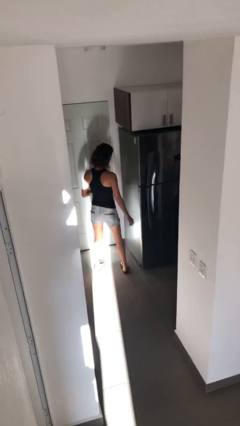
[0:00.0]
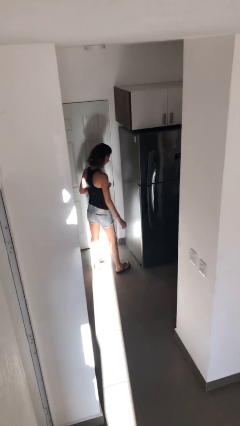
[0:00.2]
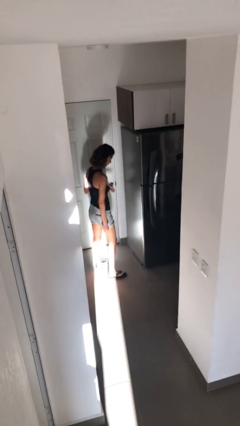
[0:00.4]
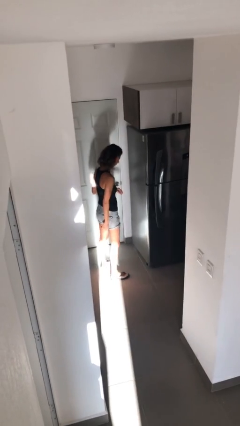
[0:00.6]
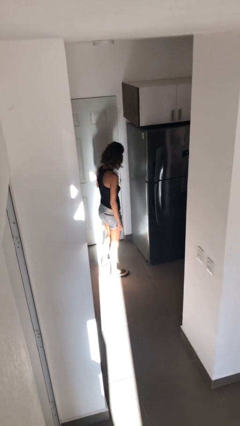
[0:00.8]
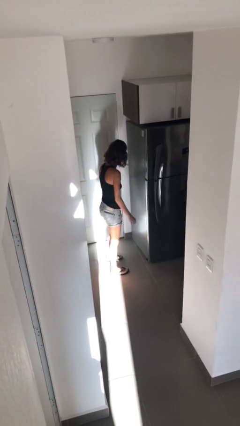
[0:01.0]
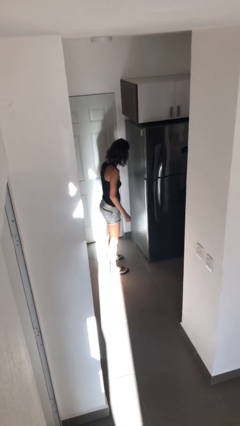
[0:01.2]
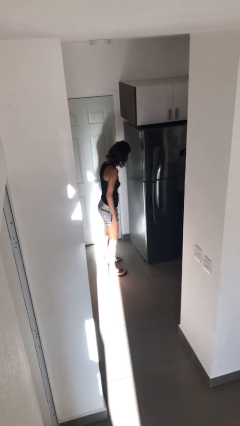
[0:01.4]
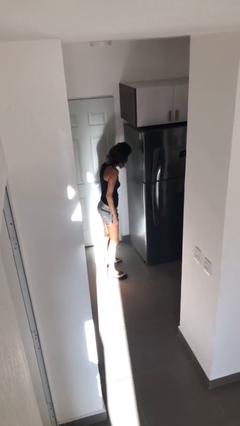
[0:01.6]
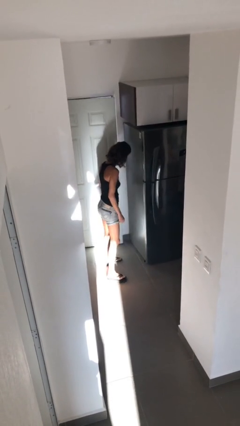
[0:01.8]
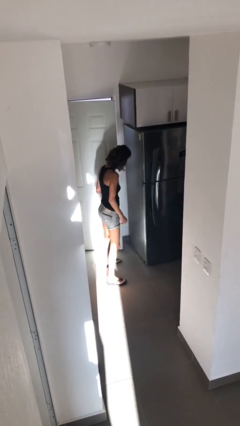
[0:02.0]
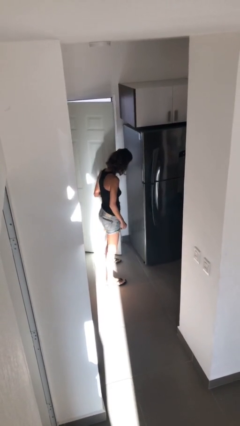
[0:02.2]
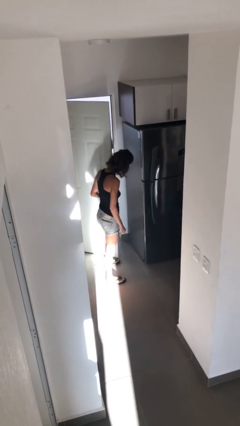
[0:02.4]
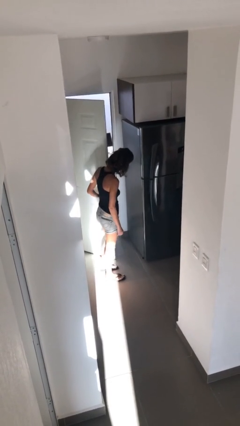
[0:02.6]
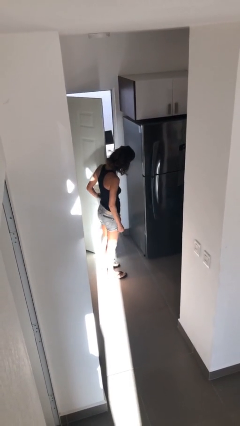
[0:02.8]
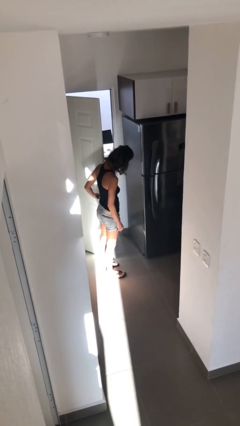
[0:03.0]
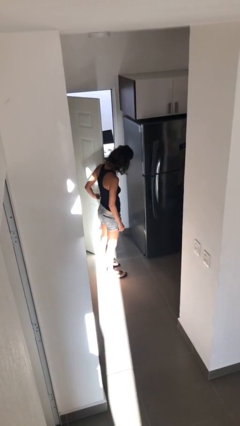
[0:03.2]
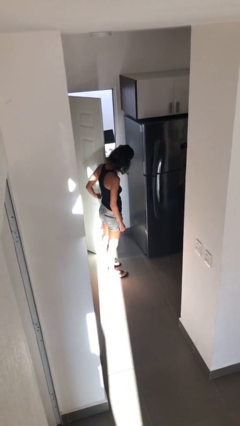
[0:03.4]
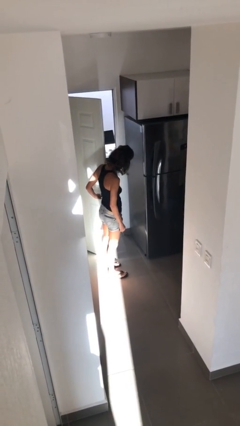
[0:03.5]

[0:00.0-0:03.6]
person opens facility door

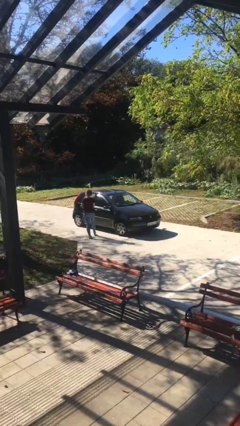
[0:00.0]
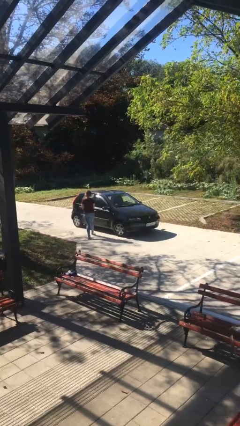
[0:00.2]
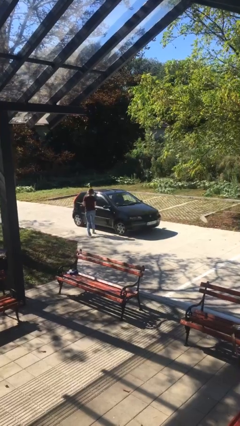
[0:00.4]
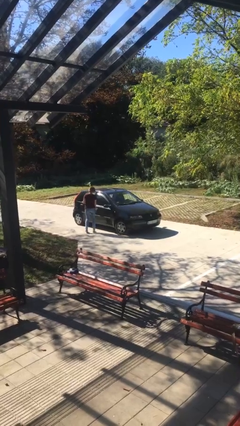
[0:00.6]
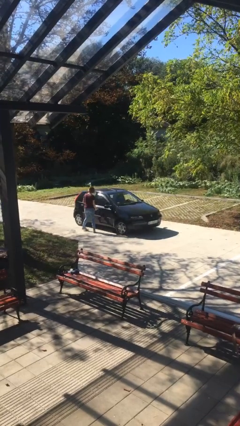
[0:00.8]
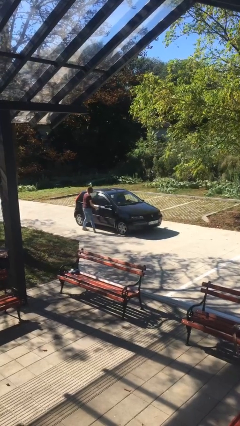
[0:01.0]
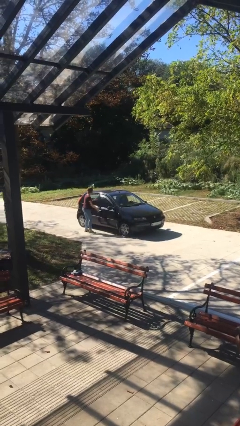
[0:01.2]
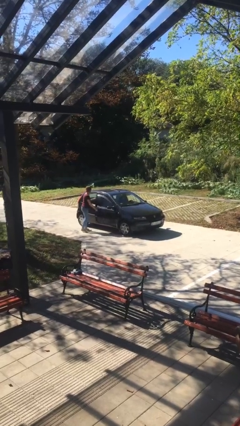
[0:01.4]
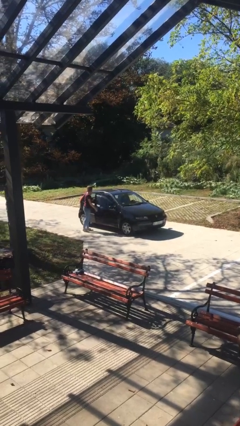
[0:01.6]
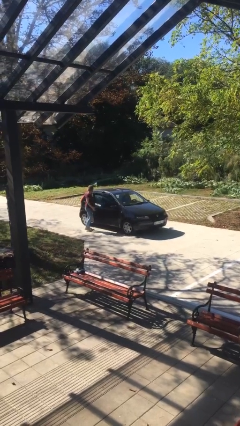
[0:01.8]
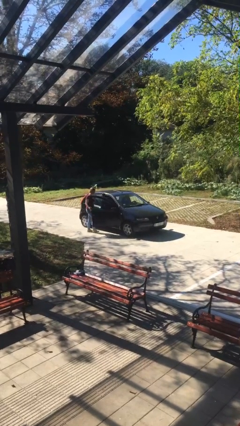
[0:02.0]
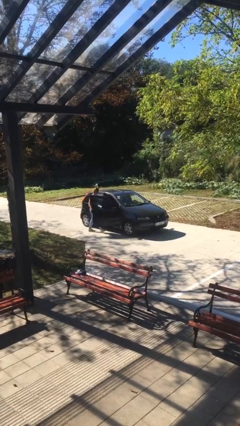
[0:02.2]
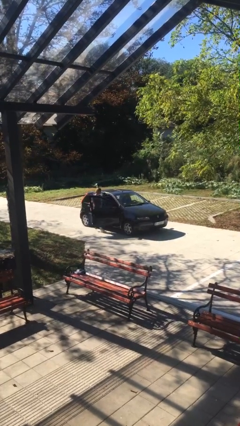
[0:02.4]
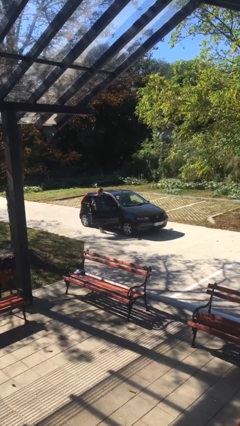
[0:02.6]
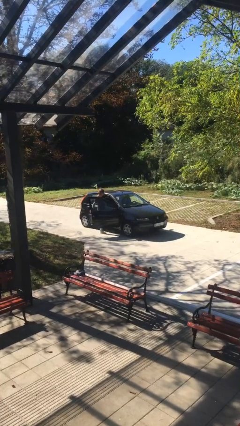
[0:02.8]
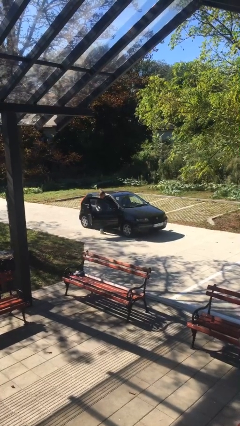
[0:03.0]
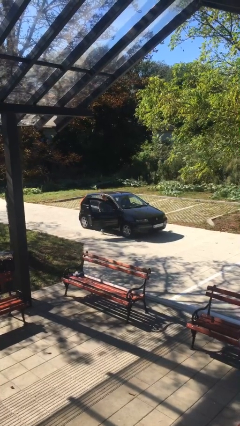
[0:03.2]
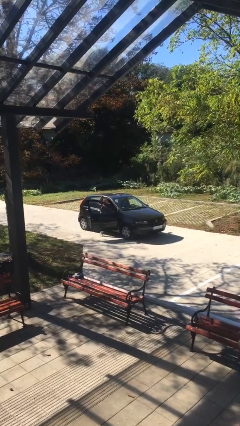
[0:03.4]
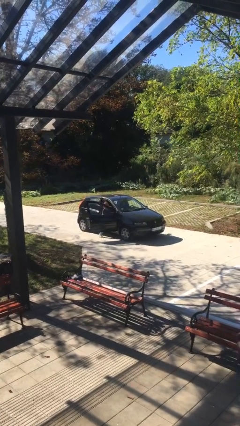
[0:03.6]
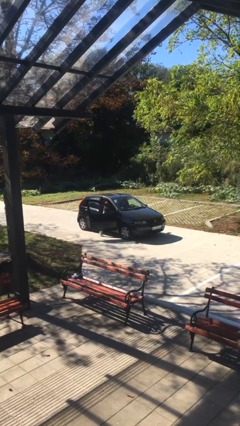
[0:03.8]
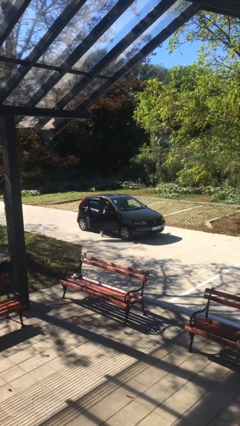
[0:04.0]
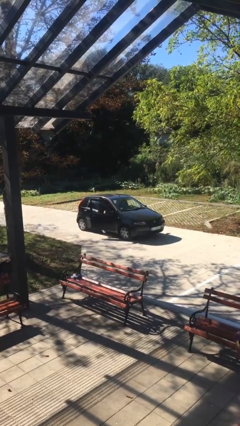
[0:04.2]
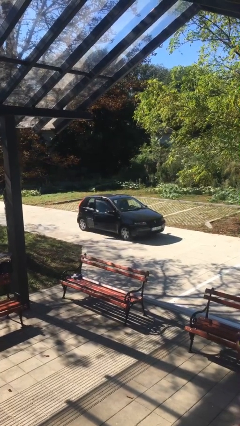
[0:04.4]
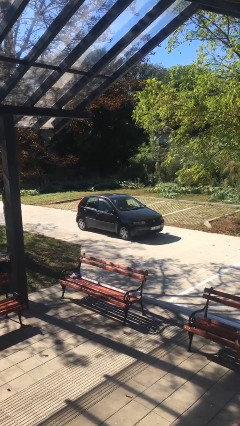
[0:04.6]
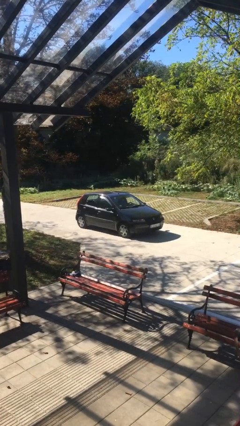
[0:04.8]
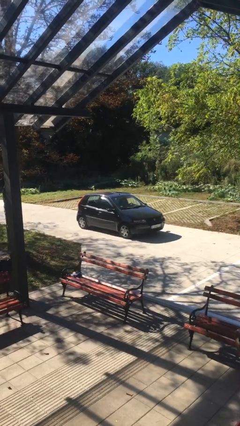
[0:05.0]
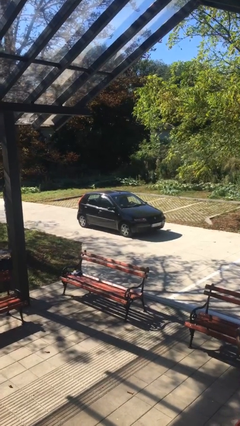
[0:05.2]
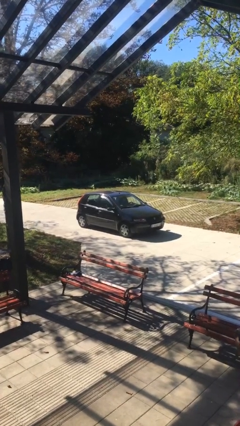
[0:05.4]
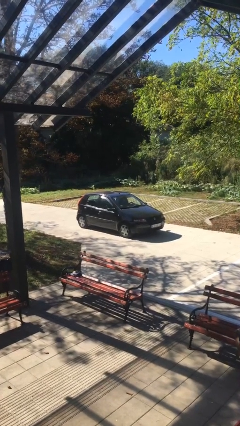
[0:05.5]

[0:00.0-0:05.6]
car picks up person

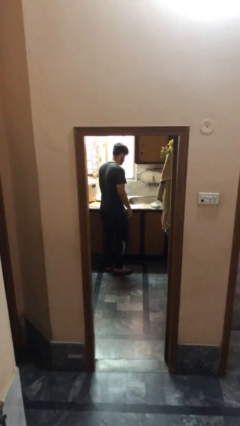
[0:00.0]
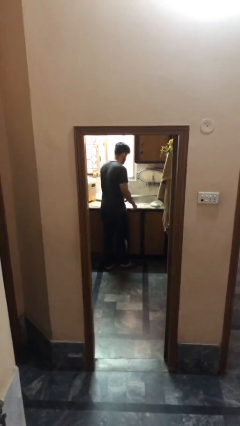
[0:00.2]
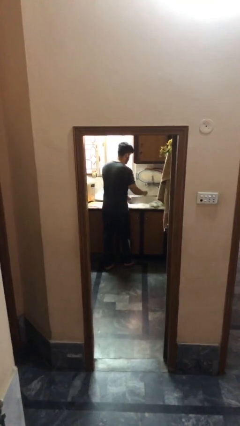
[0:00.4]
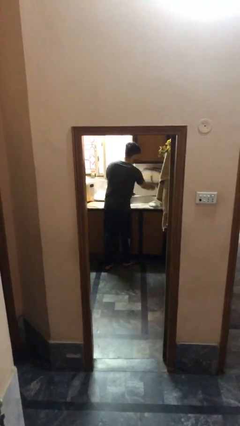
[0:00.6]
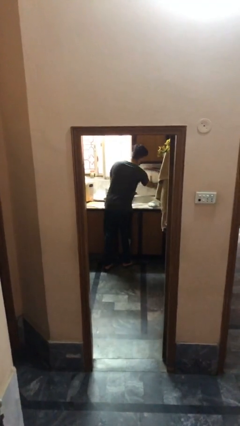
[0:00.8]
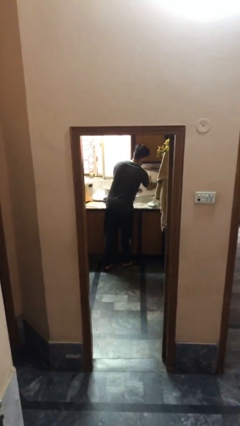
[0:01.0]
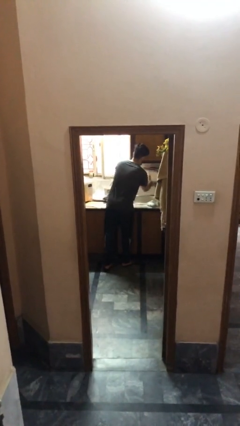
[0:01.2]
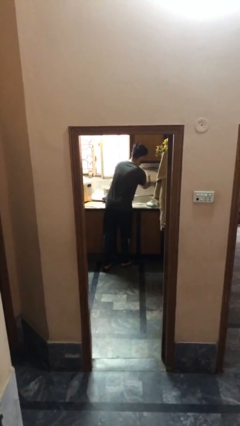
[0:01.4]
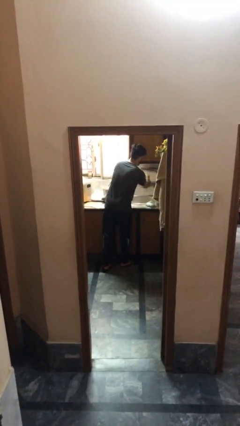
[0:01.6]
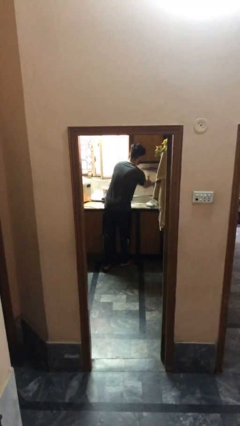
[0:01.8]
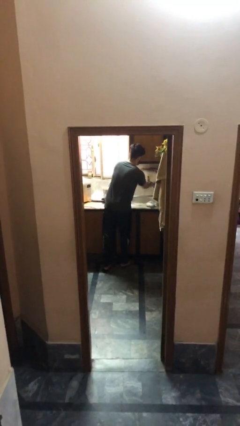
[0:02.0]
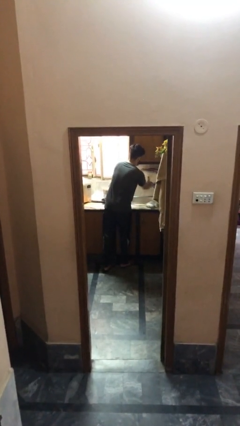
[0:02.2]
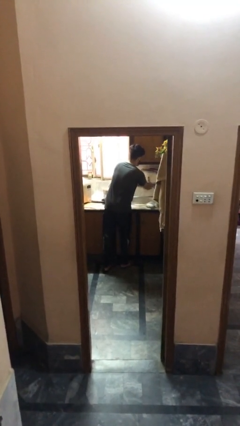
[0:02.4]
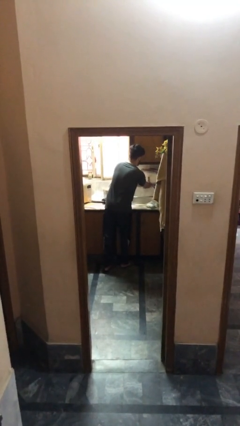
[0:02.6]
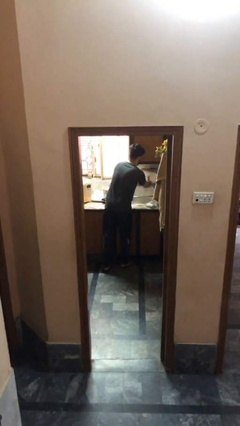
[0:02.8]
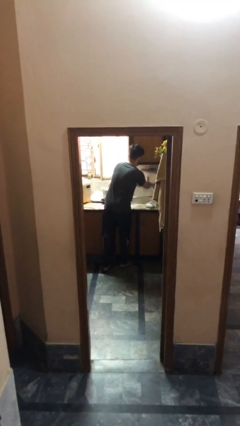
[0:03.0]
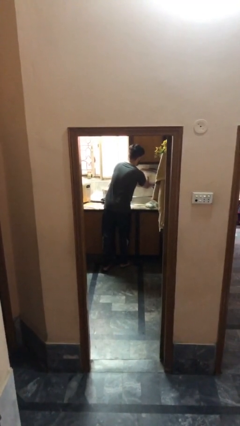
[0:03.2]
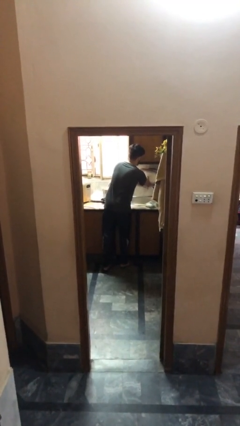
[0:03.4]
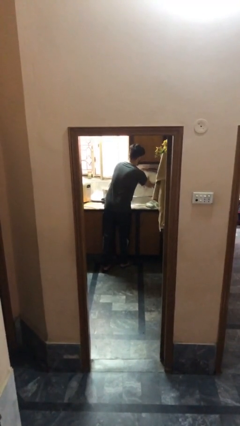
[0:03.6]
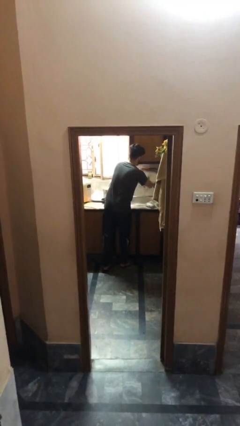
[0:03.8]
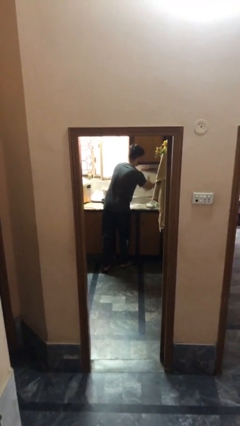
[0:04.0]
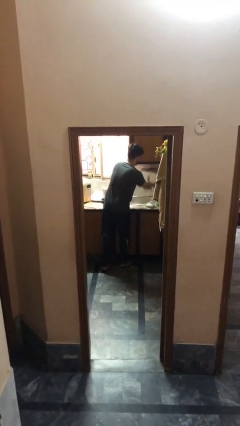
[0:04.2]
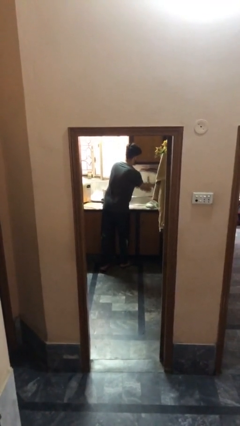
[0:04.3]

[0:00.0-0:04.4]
person washes hands

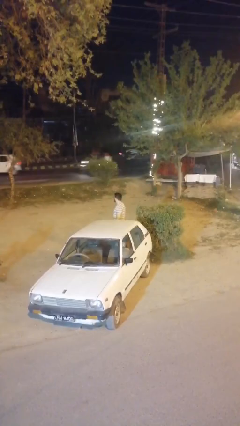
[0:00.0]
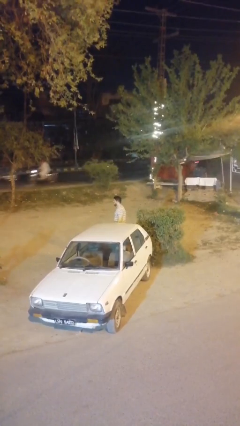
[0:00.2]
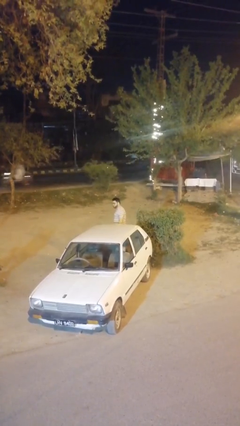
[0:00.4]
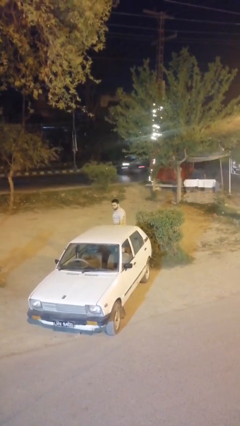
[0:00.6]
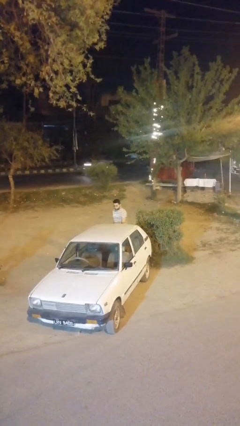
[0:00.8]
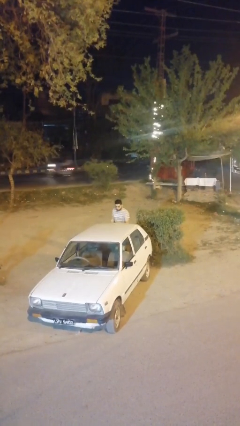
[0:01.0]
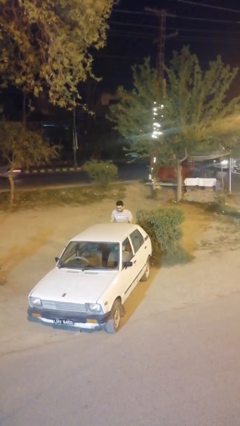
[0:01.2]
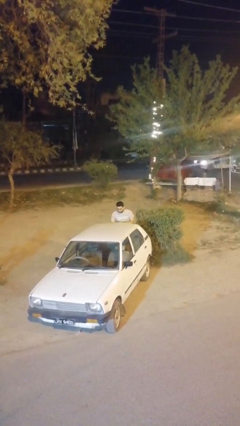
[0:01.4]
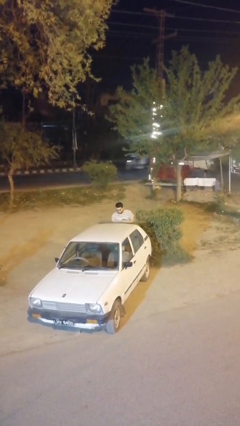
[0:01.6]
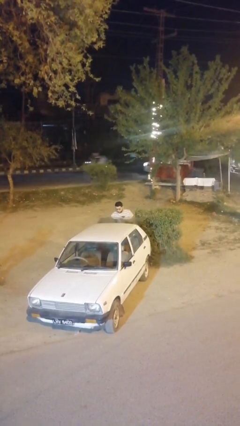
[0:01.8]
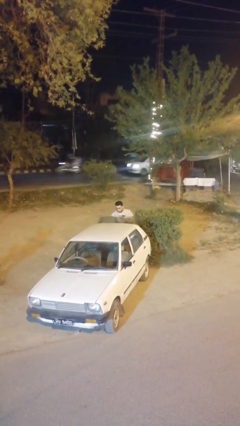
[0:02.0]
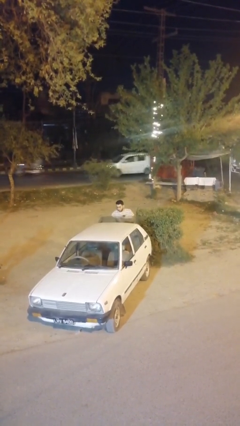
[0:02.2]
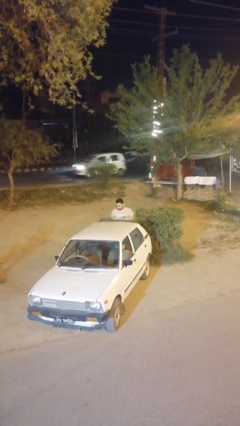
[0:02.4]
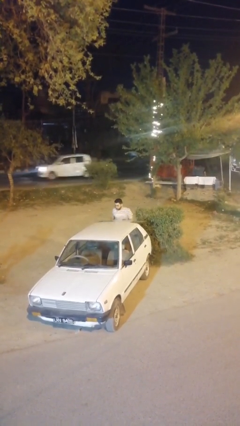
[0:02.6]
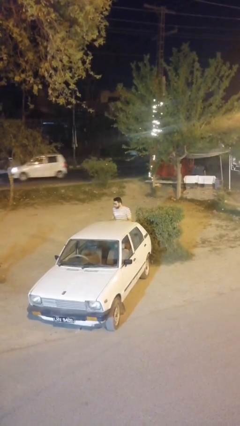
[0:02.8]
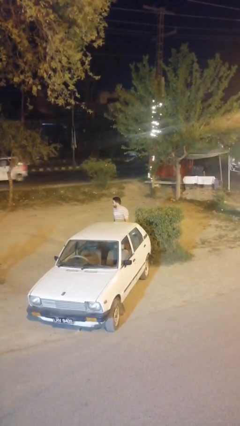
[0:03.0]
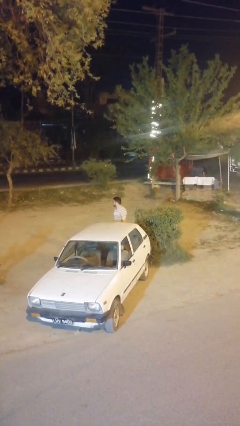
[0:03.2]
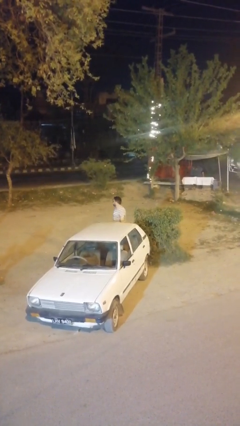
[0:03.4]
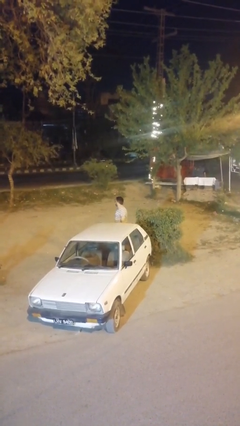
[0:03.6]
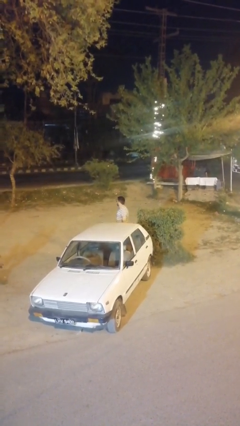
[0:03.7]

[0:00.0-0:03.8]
person unloads car

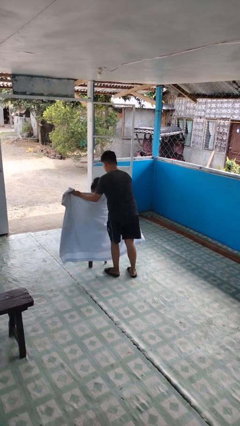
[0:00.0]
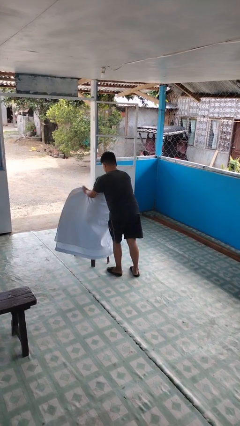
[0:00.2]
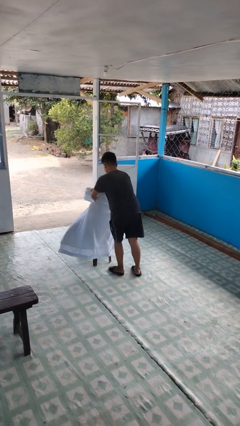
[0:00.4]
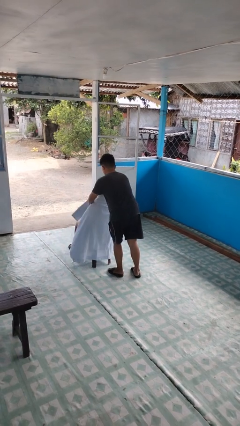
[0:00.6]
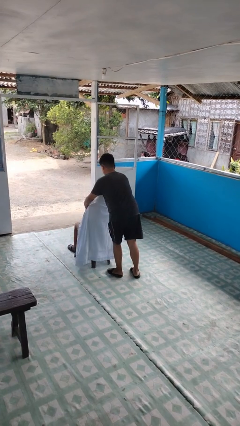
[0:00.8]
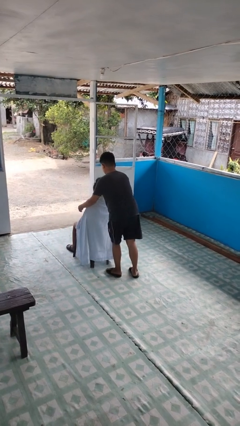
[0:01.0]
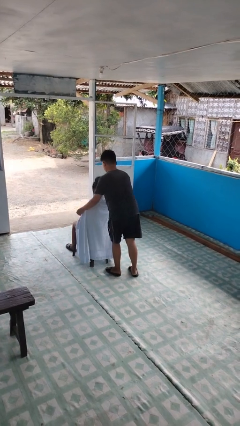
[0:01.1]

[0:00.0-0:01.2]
person covers friend with blanket
